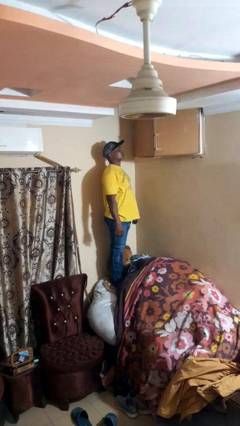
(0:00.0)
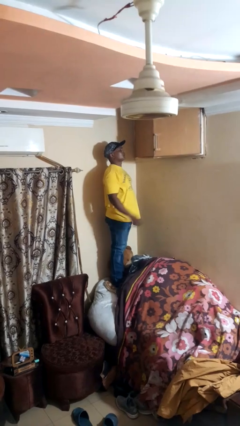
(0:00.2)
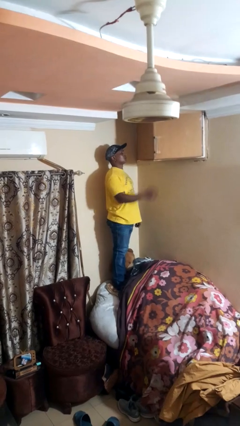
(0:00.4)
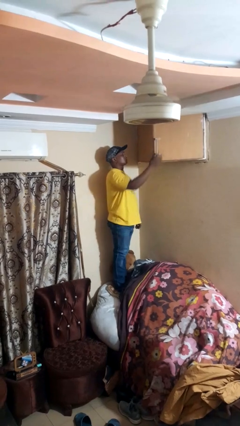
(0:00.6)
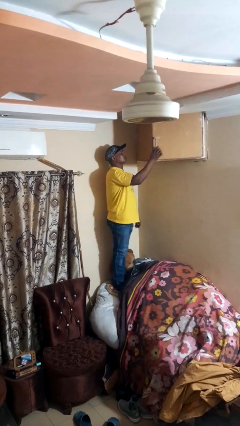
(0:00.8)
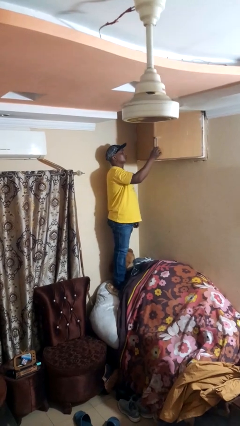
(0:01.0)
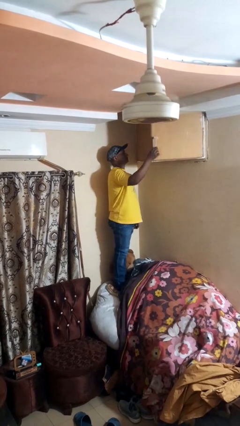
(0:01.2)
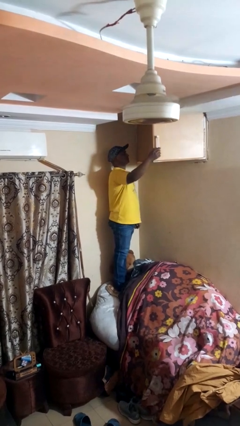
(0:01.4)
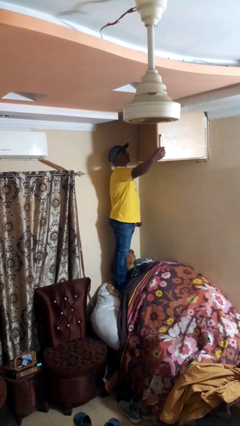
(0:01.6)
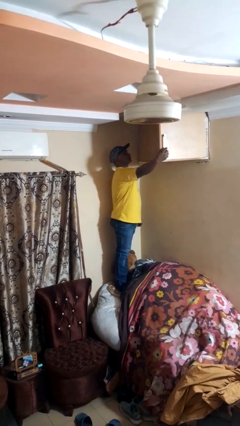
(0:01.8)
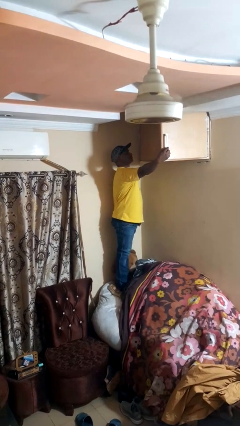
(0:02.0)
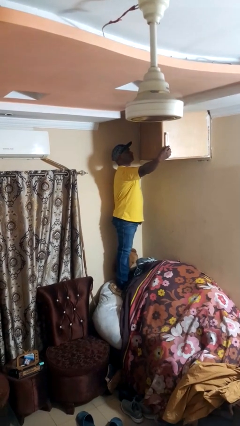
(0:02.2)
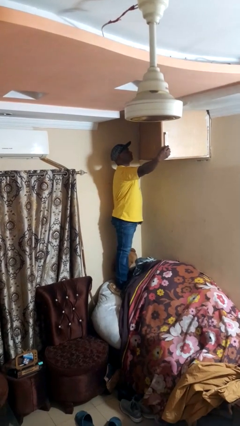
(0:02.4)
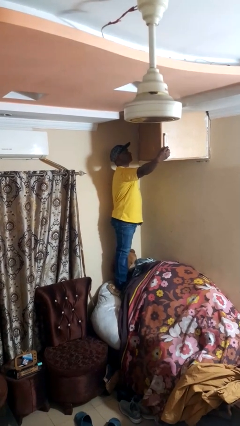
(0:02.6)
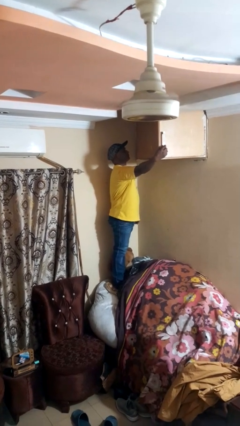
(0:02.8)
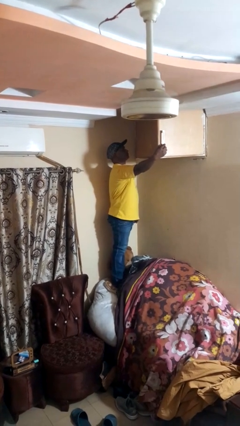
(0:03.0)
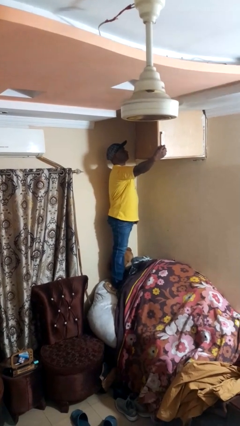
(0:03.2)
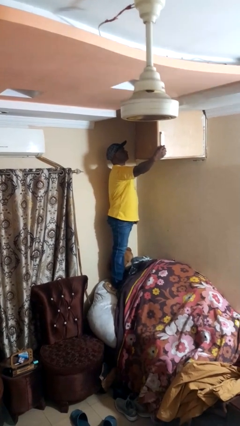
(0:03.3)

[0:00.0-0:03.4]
person opens closet door

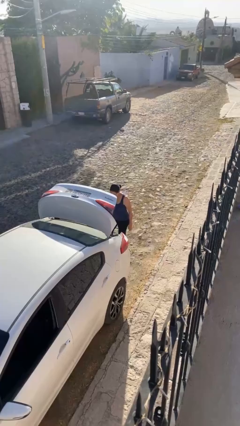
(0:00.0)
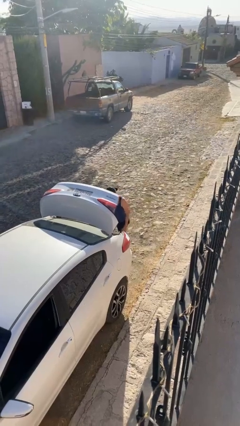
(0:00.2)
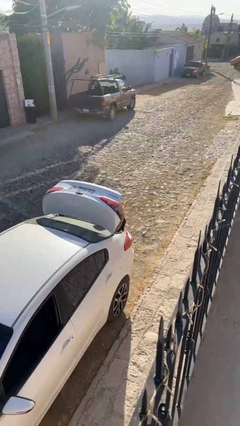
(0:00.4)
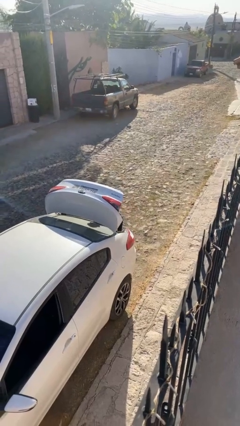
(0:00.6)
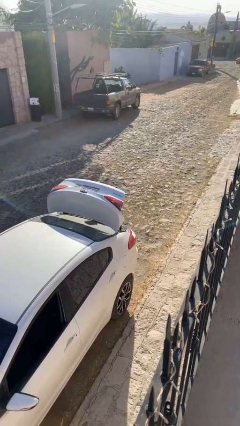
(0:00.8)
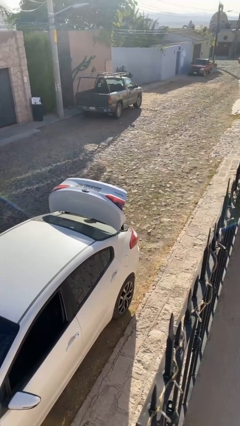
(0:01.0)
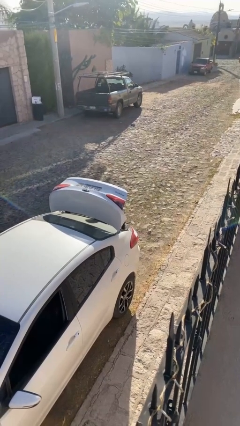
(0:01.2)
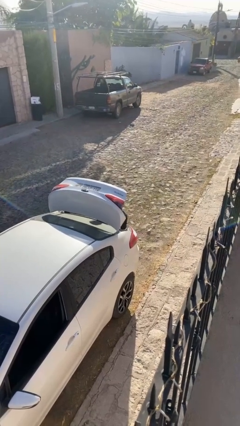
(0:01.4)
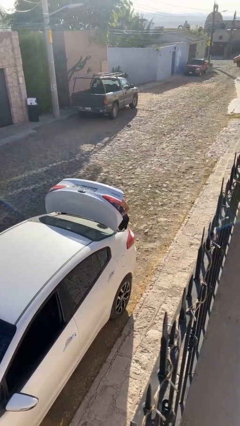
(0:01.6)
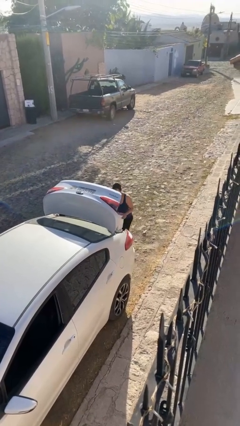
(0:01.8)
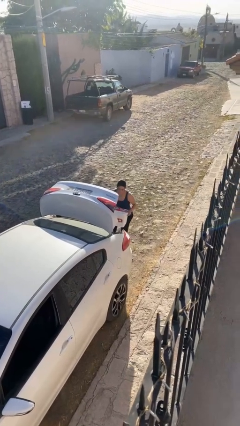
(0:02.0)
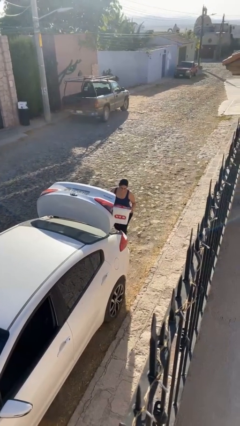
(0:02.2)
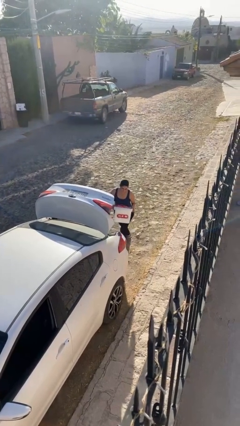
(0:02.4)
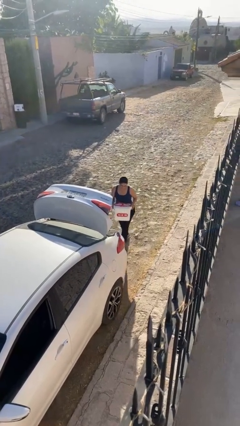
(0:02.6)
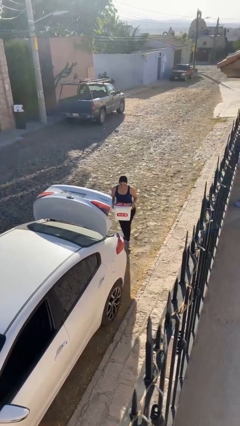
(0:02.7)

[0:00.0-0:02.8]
person unloads car

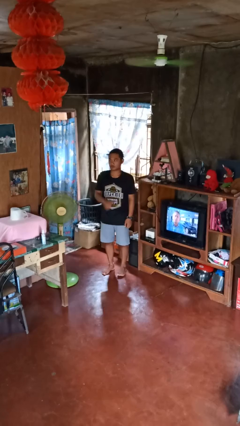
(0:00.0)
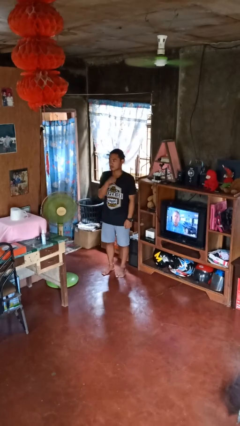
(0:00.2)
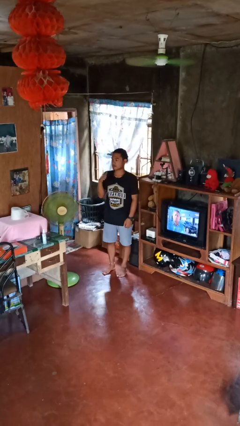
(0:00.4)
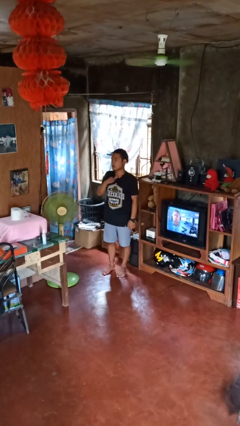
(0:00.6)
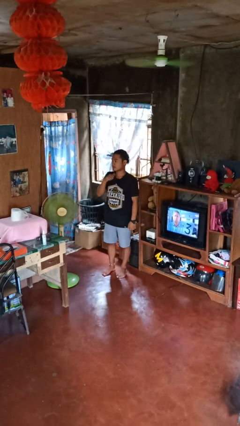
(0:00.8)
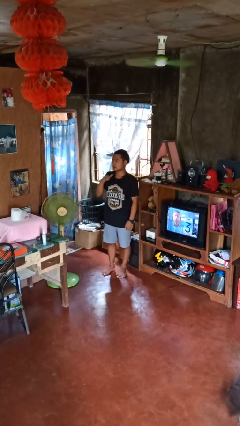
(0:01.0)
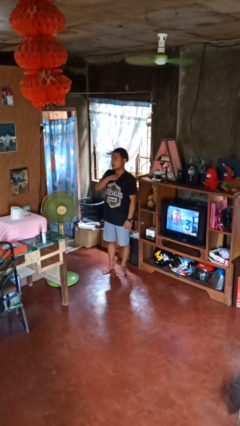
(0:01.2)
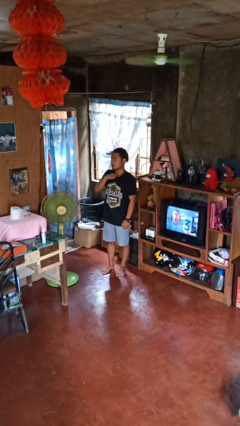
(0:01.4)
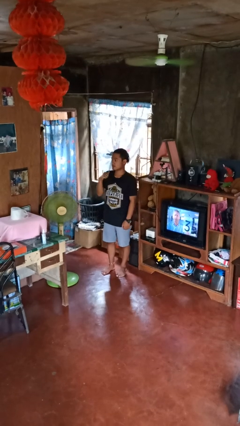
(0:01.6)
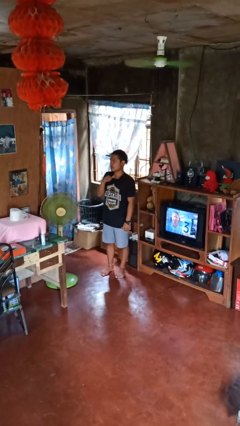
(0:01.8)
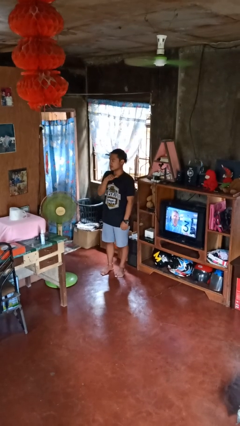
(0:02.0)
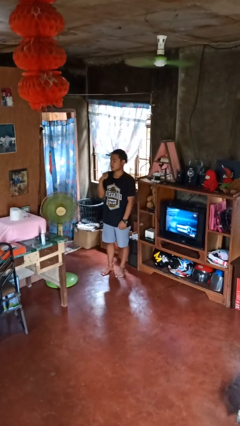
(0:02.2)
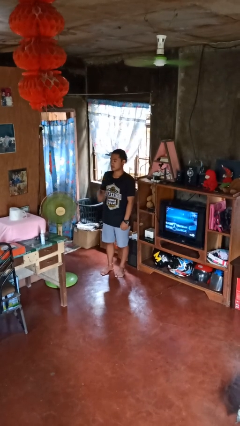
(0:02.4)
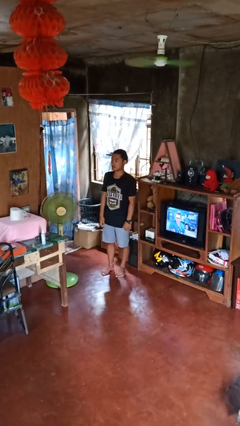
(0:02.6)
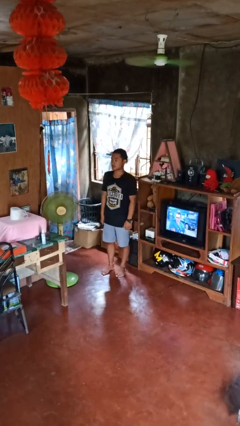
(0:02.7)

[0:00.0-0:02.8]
person gestures cut

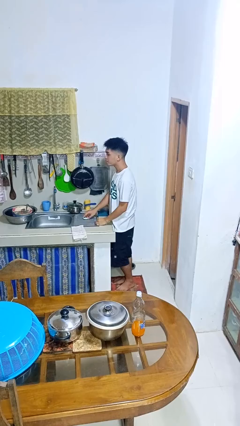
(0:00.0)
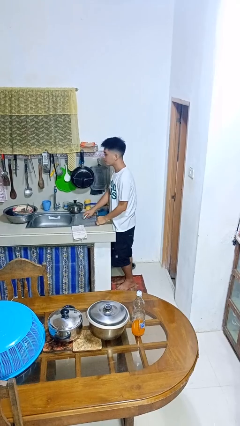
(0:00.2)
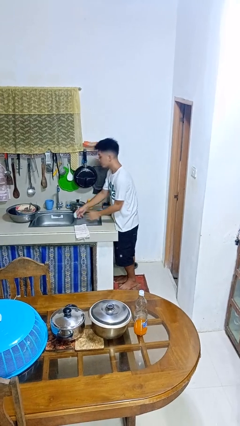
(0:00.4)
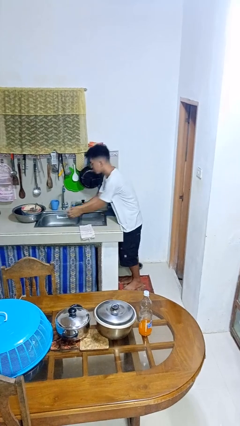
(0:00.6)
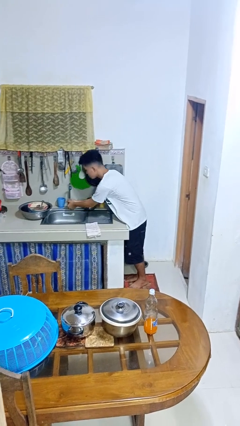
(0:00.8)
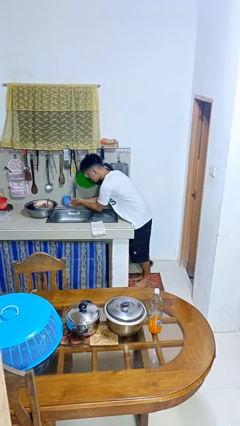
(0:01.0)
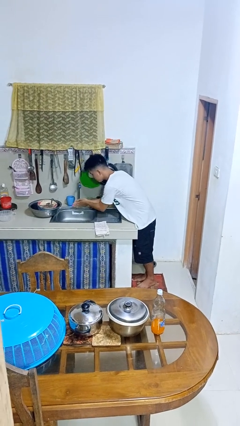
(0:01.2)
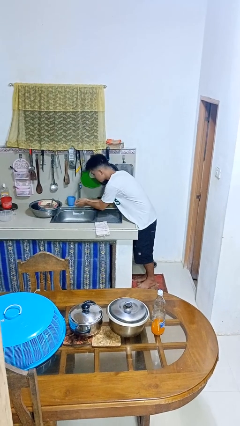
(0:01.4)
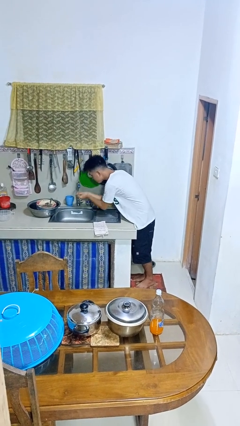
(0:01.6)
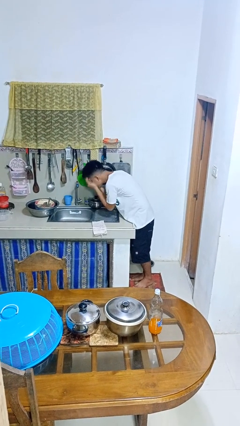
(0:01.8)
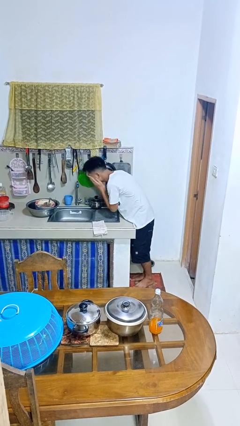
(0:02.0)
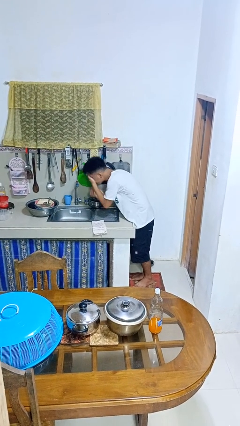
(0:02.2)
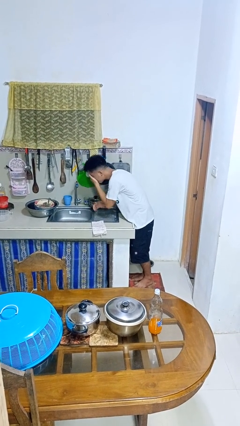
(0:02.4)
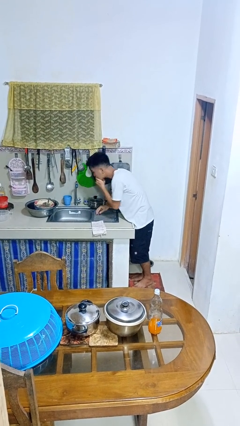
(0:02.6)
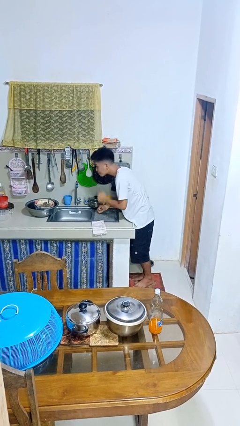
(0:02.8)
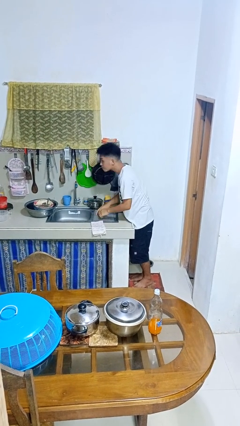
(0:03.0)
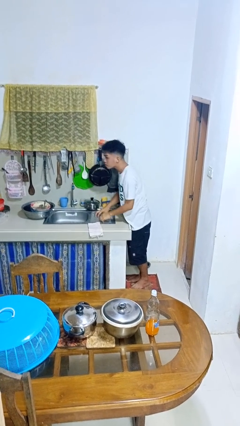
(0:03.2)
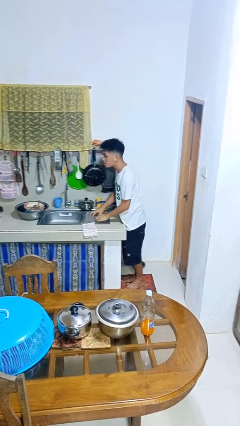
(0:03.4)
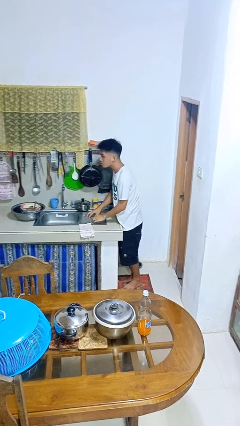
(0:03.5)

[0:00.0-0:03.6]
person washes face

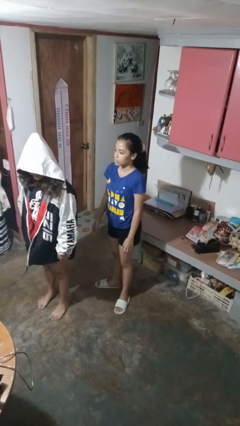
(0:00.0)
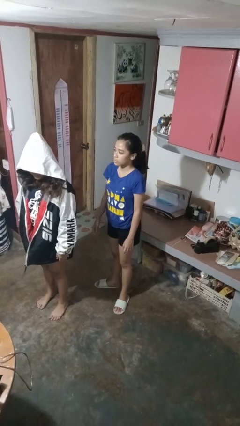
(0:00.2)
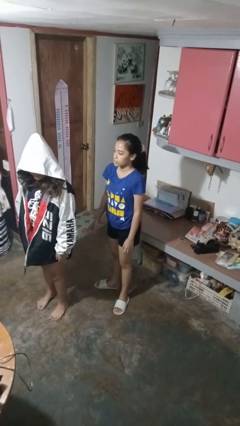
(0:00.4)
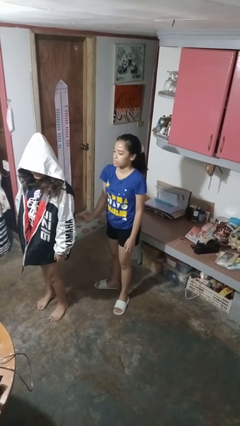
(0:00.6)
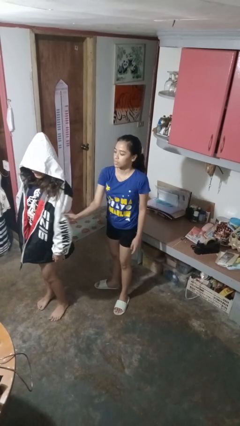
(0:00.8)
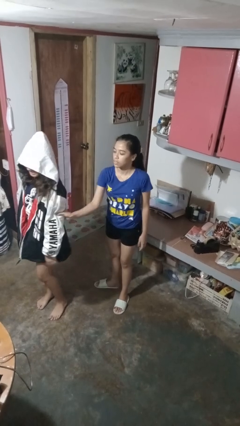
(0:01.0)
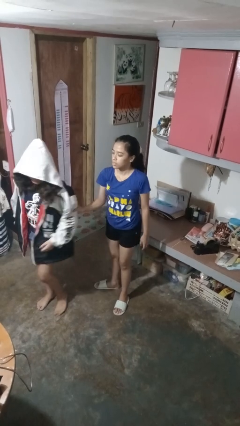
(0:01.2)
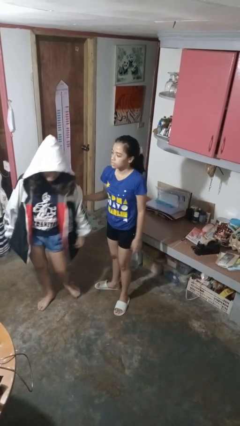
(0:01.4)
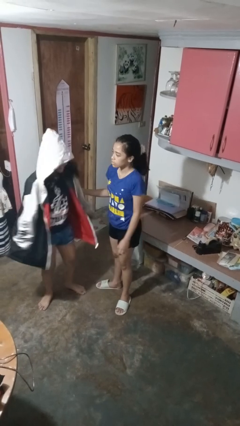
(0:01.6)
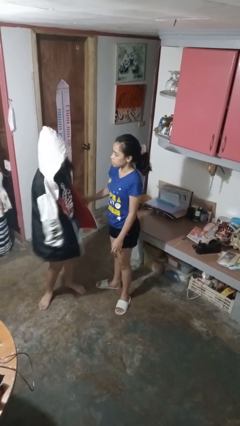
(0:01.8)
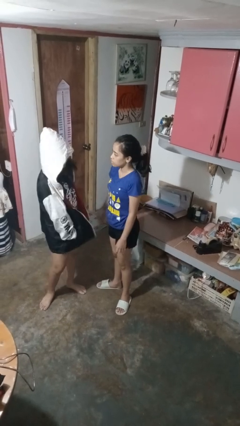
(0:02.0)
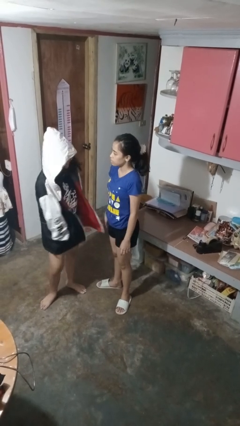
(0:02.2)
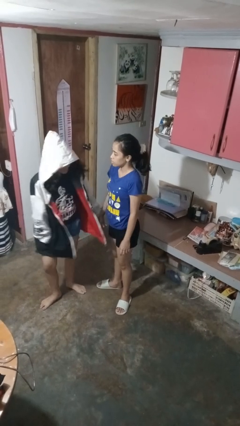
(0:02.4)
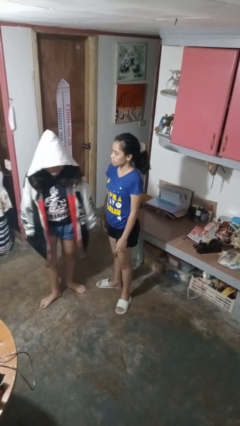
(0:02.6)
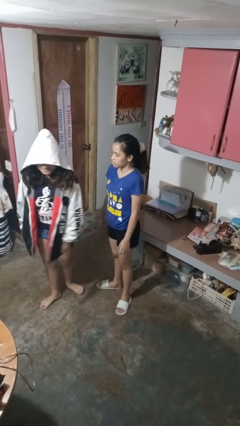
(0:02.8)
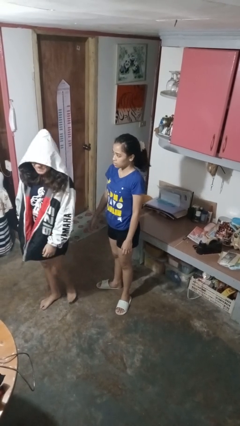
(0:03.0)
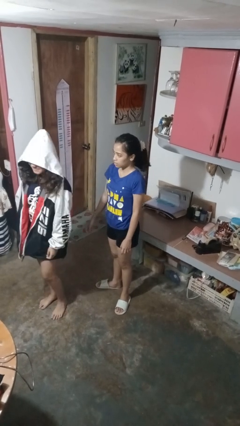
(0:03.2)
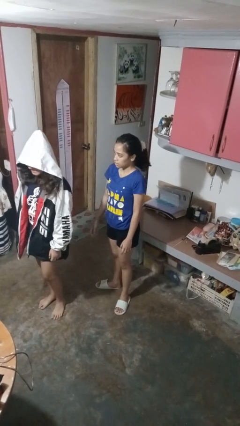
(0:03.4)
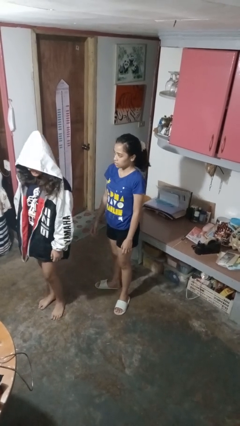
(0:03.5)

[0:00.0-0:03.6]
person grabs person by bicep

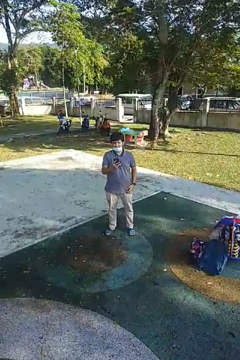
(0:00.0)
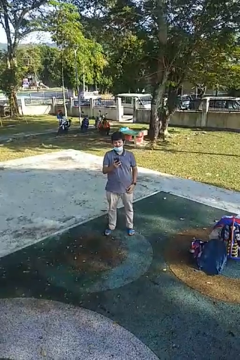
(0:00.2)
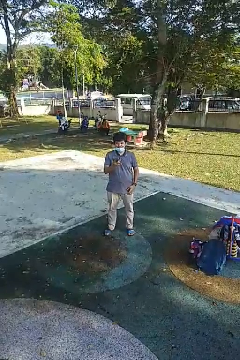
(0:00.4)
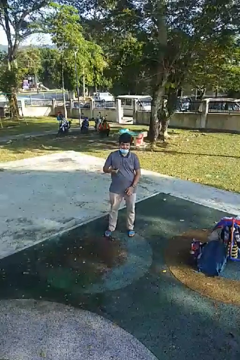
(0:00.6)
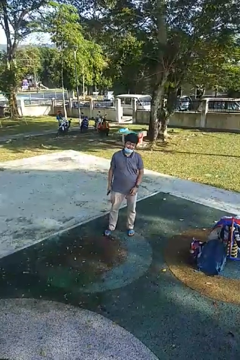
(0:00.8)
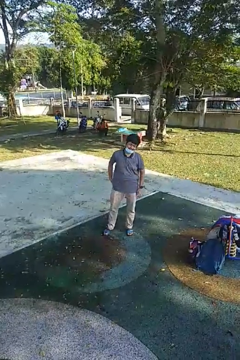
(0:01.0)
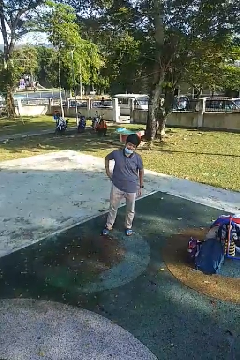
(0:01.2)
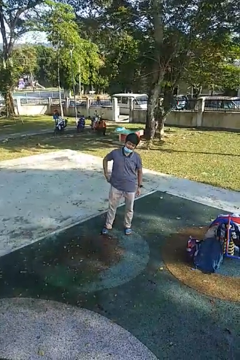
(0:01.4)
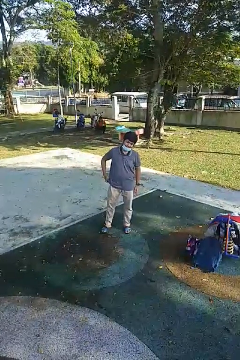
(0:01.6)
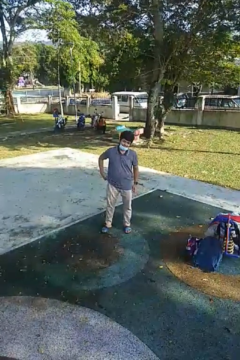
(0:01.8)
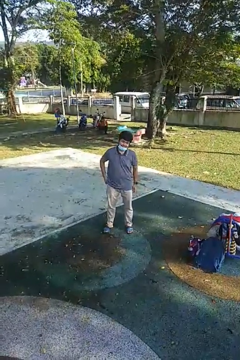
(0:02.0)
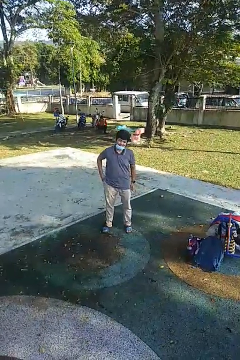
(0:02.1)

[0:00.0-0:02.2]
person puts phone into pocket
